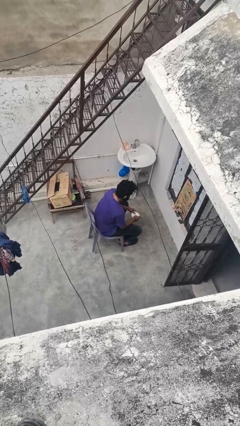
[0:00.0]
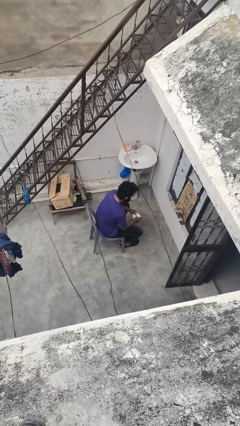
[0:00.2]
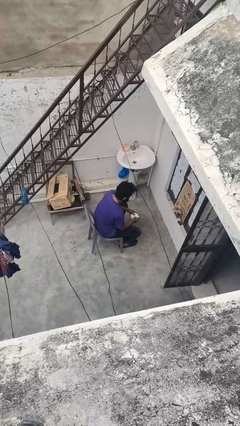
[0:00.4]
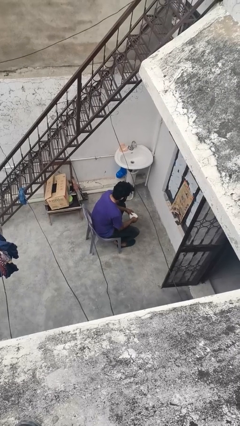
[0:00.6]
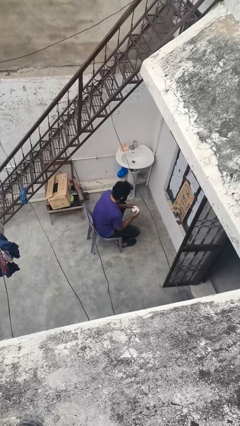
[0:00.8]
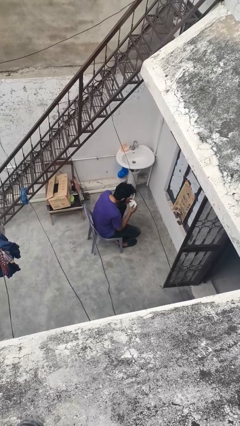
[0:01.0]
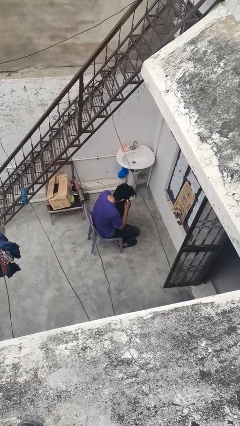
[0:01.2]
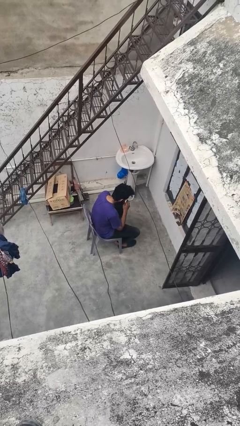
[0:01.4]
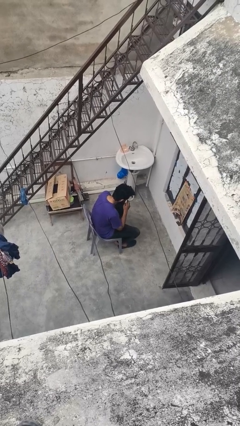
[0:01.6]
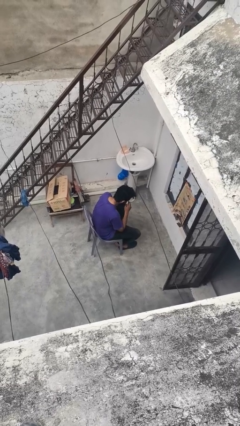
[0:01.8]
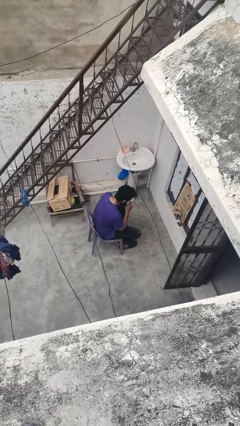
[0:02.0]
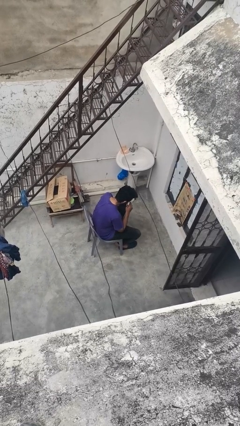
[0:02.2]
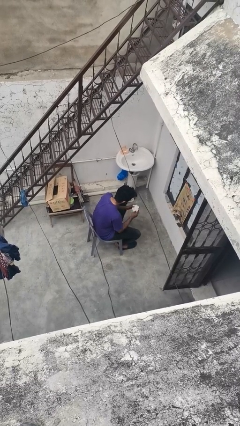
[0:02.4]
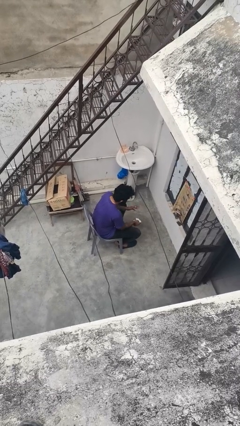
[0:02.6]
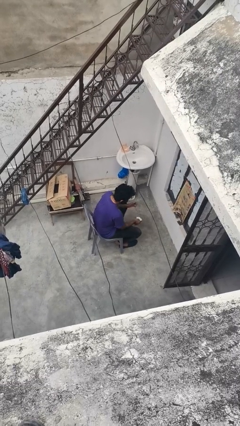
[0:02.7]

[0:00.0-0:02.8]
person blows nose

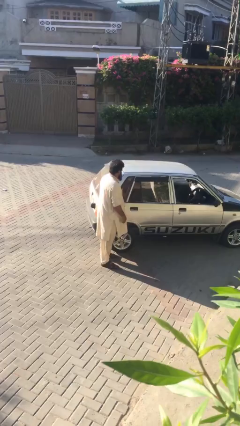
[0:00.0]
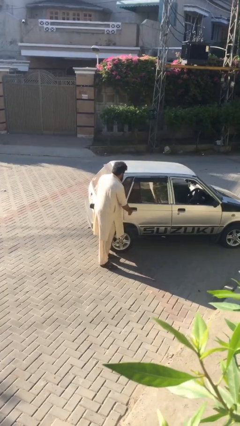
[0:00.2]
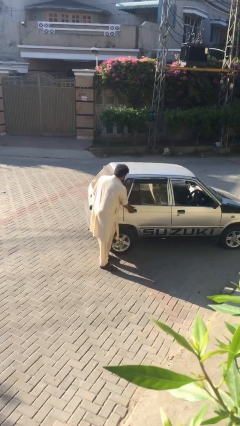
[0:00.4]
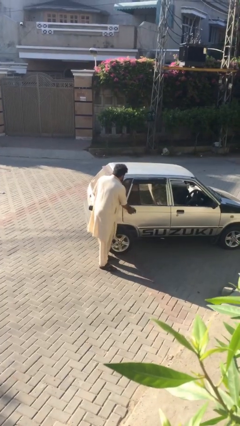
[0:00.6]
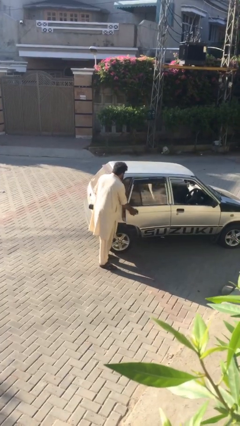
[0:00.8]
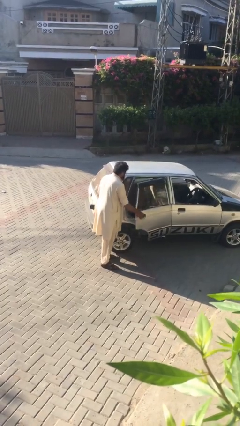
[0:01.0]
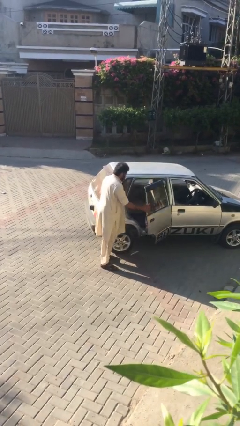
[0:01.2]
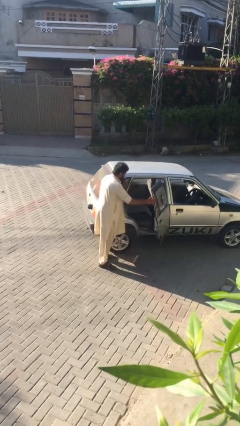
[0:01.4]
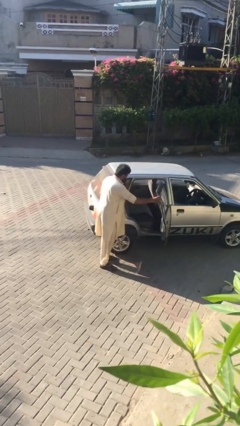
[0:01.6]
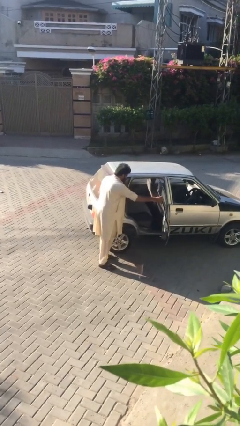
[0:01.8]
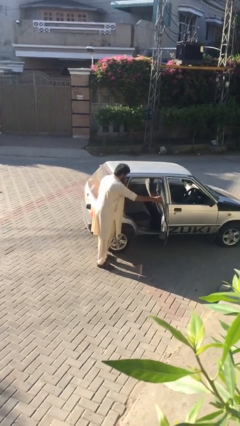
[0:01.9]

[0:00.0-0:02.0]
person opens car door

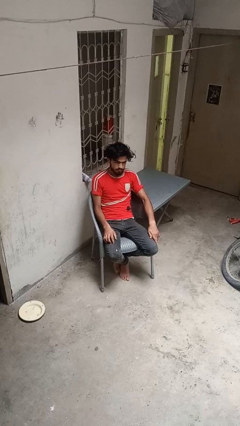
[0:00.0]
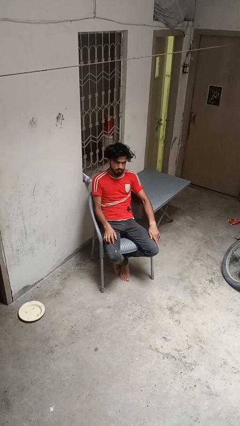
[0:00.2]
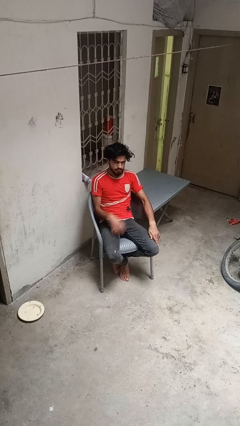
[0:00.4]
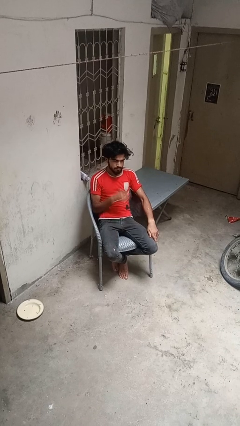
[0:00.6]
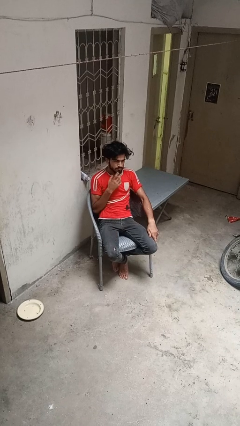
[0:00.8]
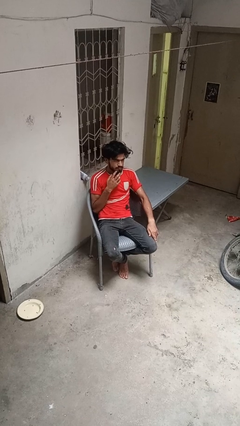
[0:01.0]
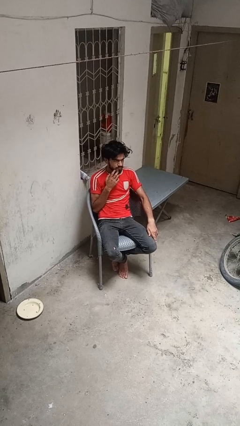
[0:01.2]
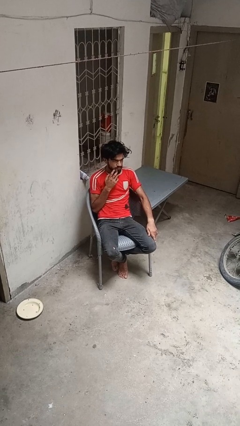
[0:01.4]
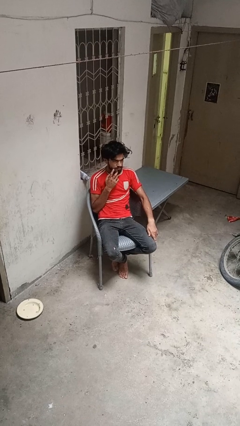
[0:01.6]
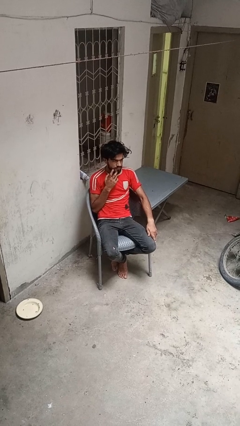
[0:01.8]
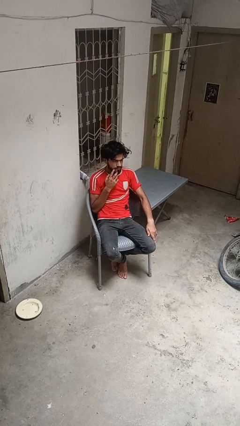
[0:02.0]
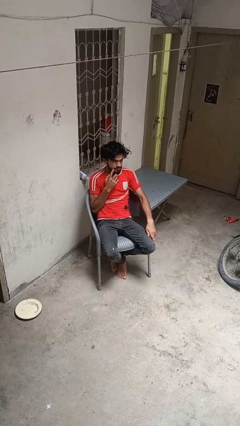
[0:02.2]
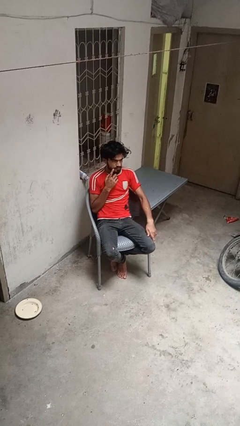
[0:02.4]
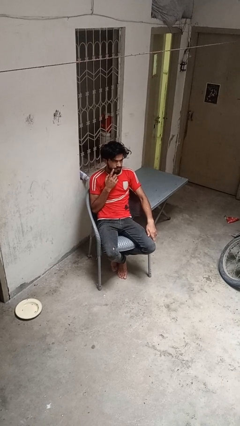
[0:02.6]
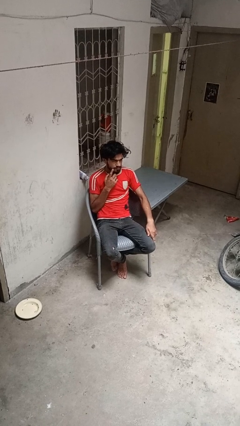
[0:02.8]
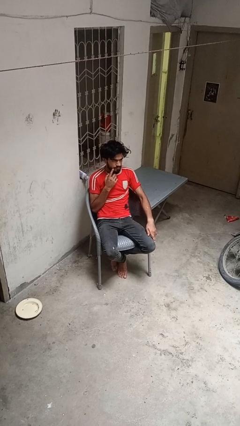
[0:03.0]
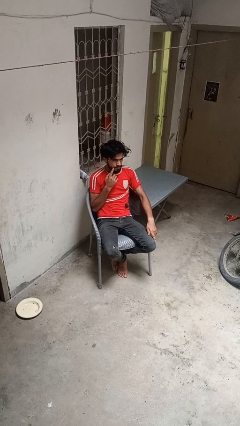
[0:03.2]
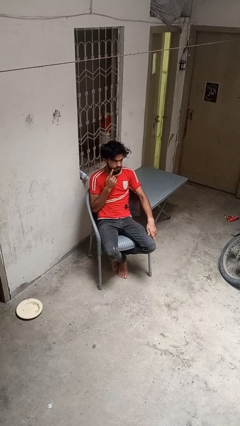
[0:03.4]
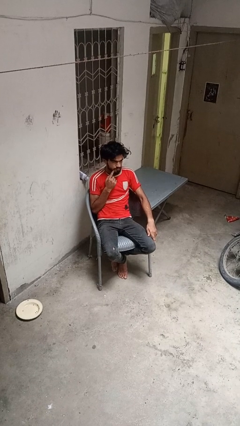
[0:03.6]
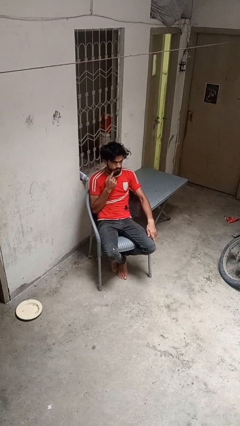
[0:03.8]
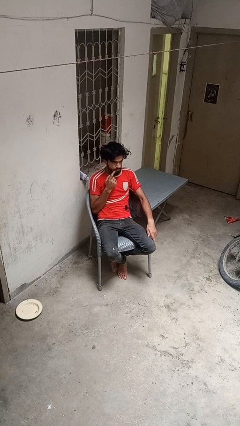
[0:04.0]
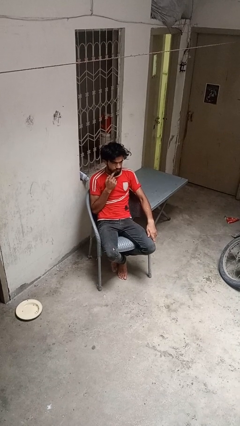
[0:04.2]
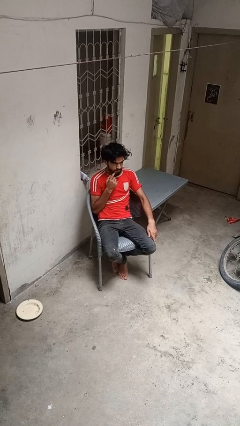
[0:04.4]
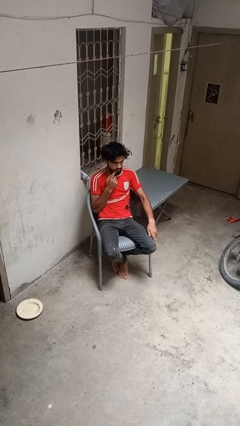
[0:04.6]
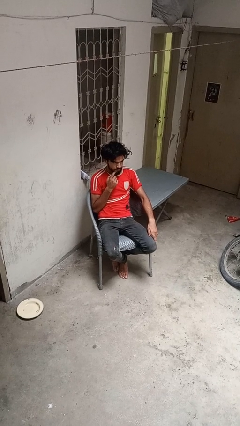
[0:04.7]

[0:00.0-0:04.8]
person strokes chin

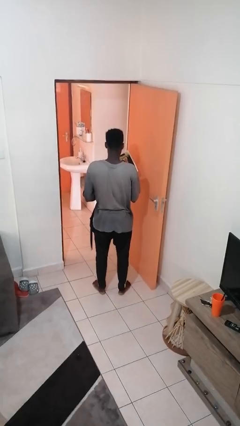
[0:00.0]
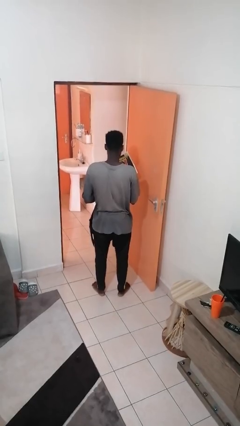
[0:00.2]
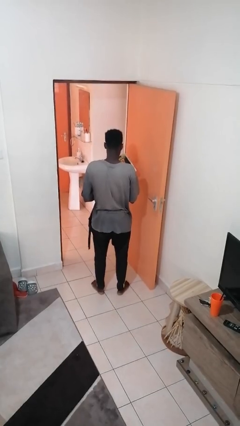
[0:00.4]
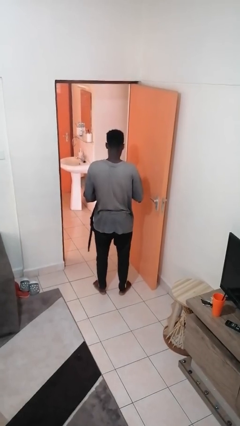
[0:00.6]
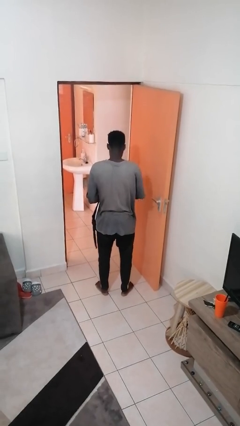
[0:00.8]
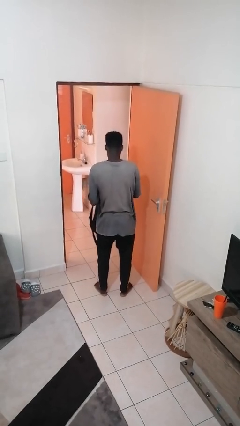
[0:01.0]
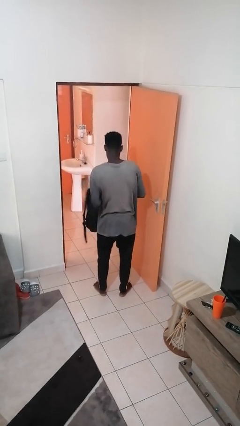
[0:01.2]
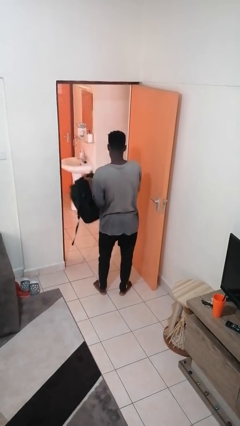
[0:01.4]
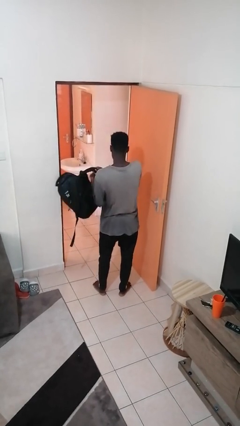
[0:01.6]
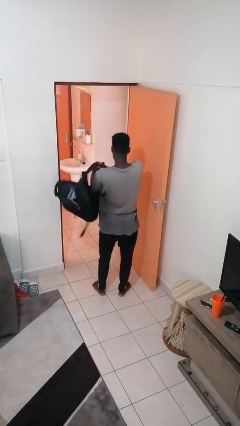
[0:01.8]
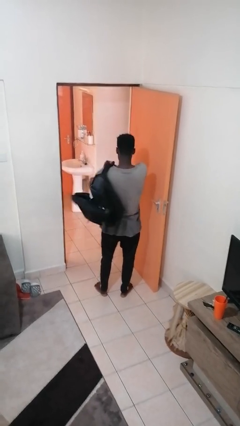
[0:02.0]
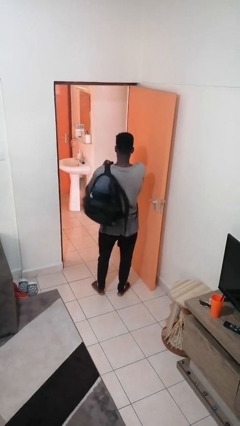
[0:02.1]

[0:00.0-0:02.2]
person puts object into backpack

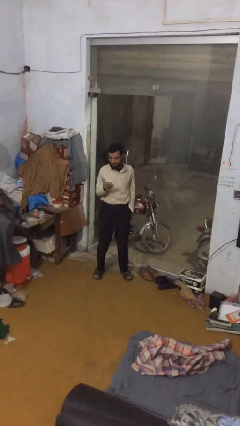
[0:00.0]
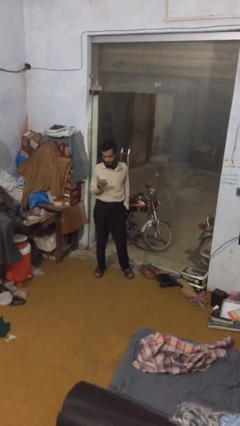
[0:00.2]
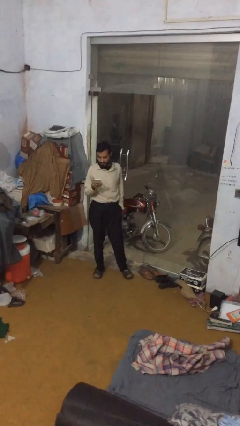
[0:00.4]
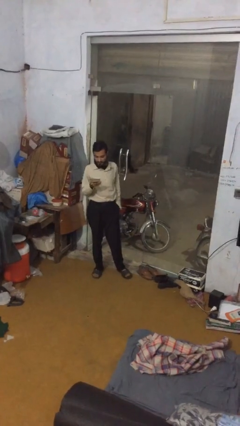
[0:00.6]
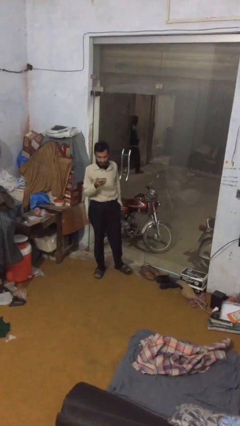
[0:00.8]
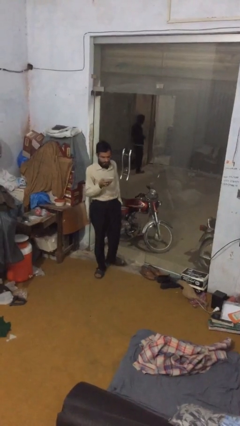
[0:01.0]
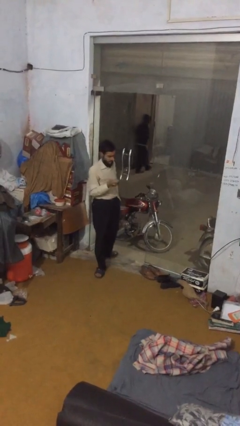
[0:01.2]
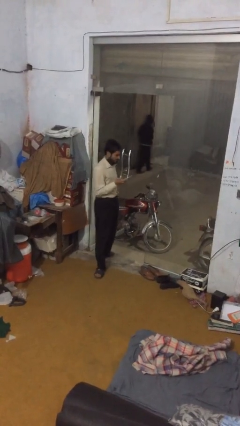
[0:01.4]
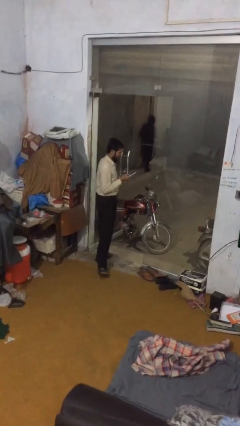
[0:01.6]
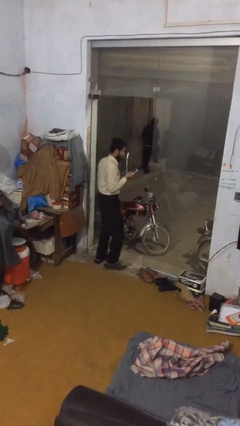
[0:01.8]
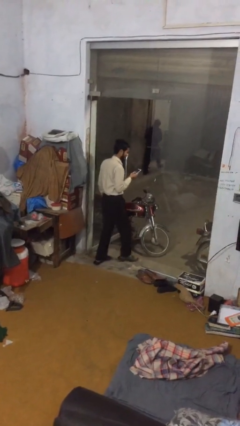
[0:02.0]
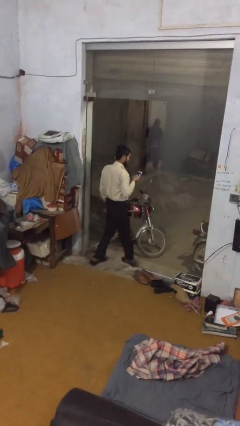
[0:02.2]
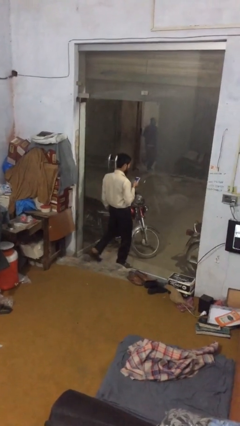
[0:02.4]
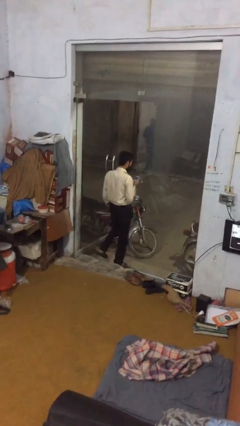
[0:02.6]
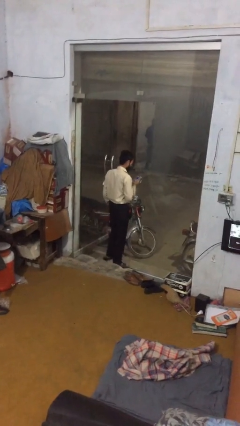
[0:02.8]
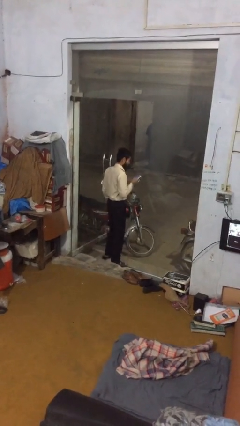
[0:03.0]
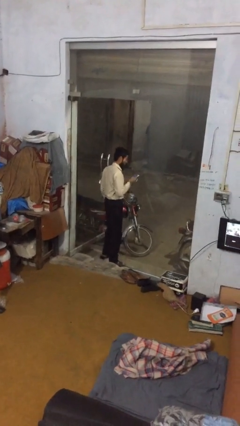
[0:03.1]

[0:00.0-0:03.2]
person exits scene through structure

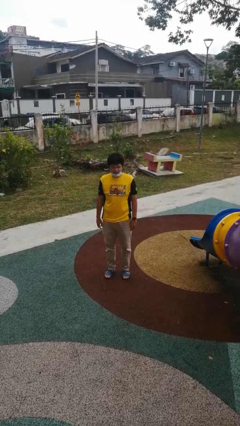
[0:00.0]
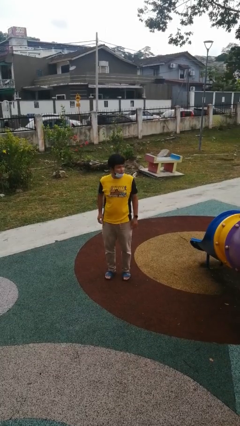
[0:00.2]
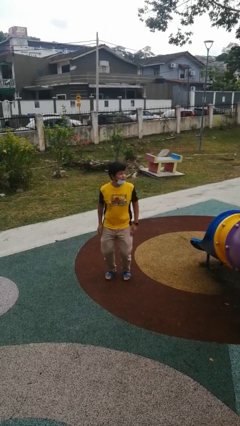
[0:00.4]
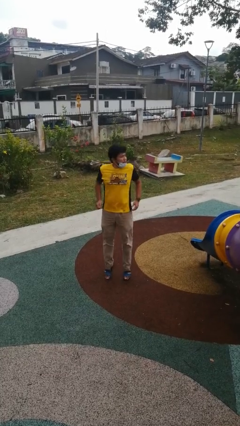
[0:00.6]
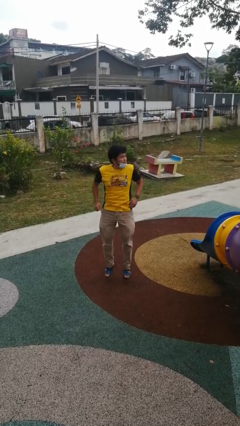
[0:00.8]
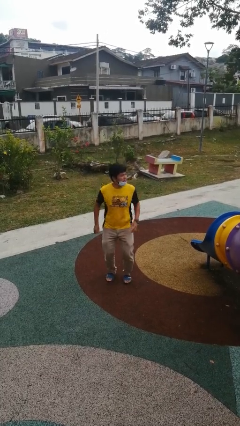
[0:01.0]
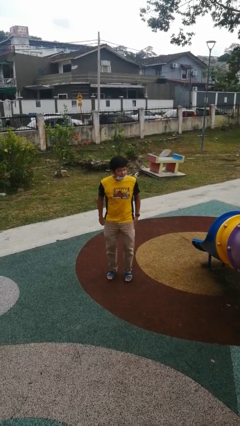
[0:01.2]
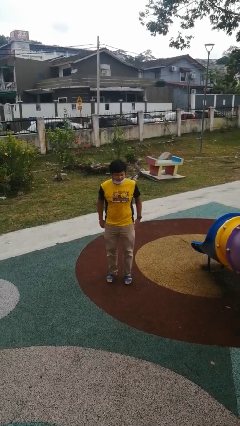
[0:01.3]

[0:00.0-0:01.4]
person jumps

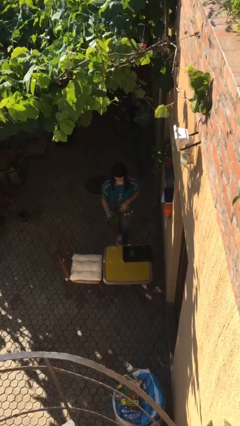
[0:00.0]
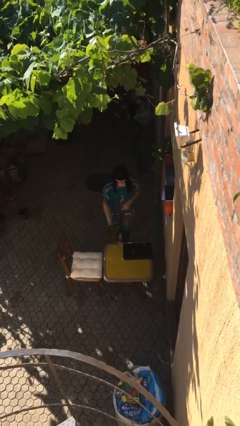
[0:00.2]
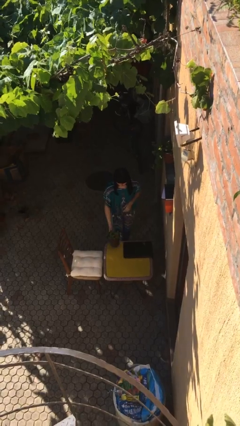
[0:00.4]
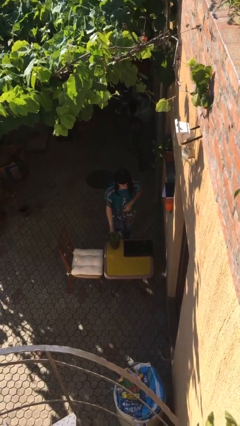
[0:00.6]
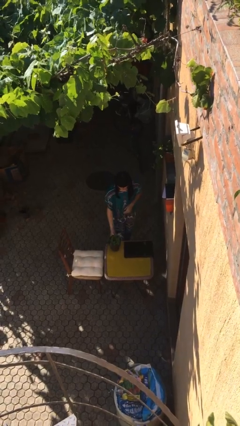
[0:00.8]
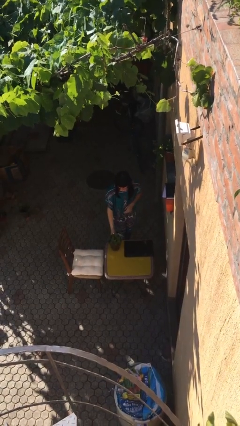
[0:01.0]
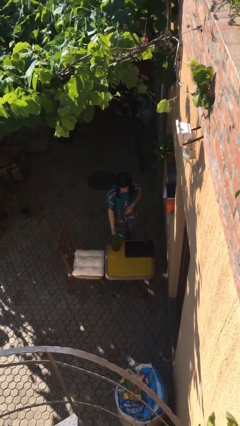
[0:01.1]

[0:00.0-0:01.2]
person puts down object on table
